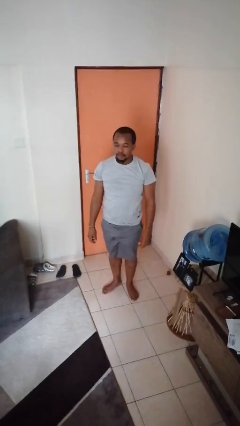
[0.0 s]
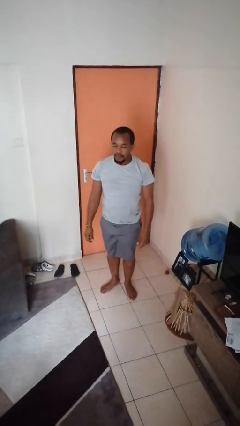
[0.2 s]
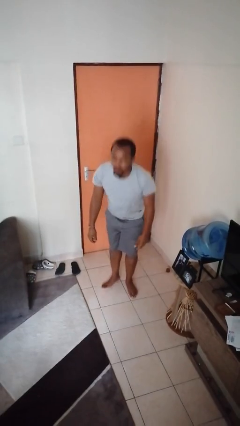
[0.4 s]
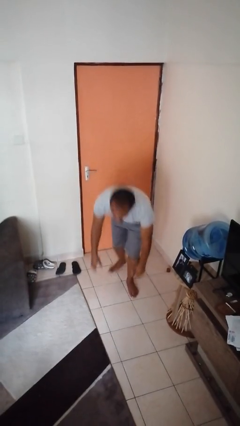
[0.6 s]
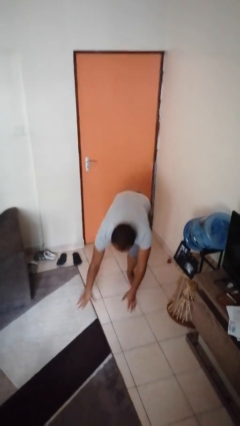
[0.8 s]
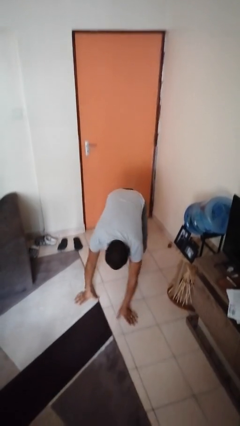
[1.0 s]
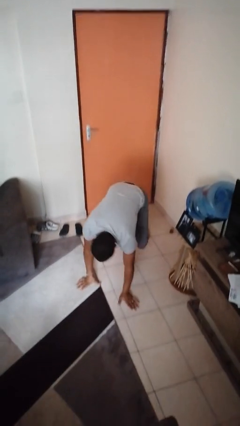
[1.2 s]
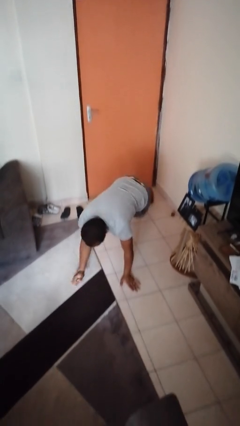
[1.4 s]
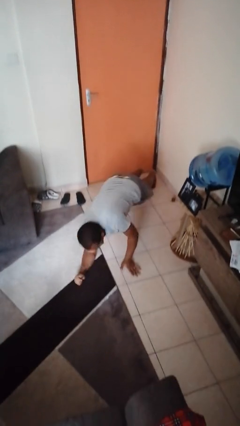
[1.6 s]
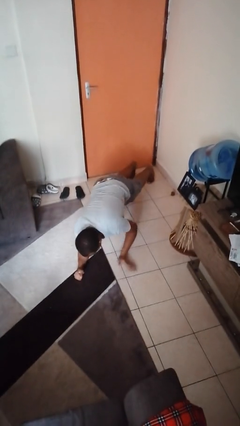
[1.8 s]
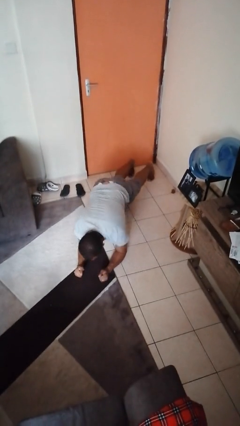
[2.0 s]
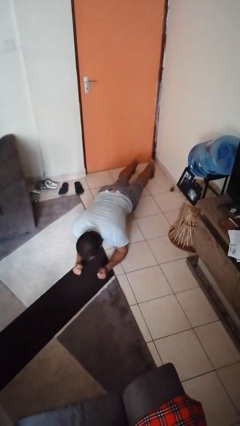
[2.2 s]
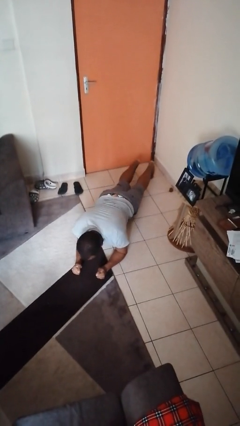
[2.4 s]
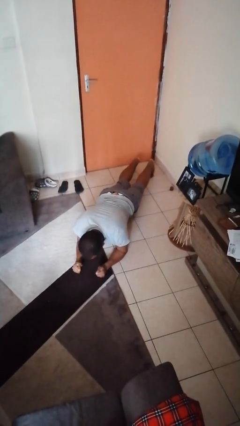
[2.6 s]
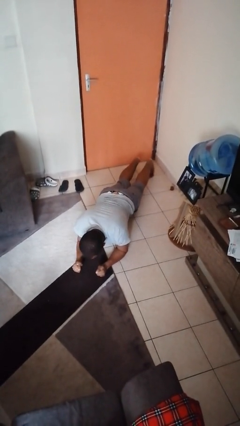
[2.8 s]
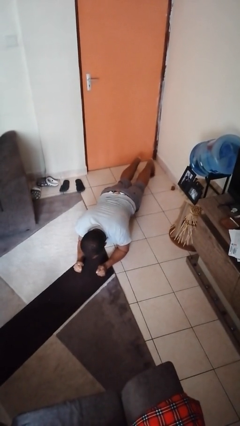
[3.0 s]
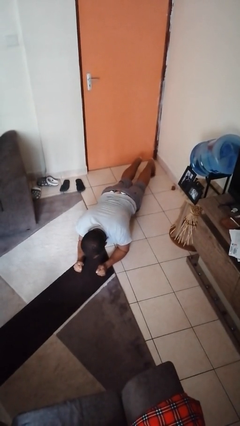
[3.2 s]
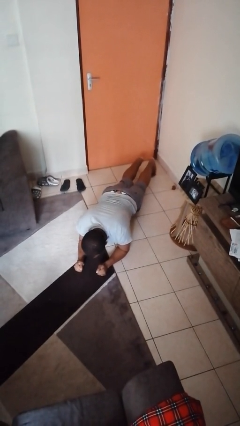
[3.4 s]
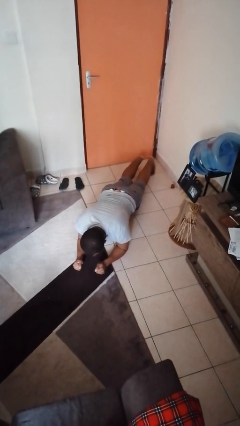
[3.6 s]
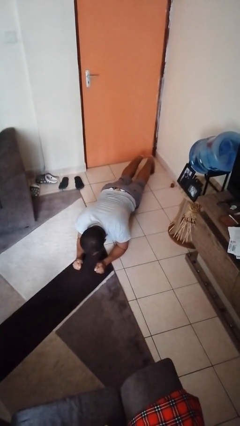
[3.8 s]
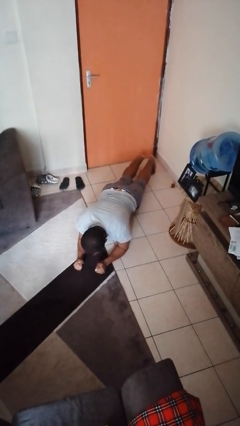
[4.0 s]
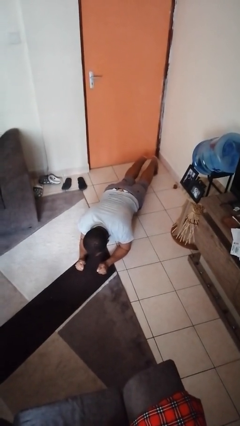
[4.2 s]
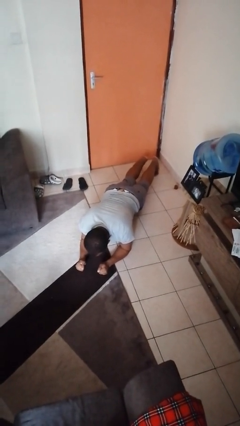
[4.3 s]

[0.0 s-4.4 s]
person exercises with plank

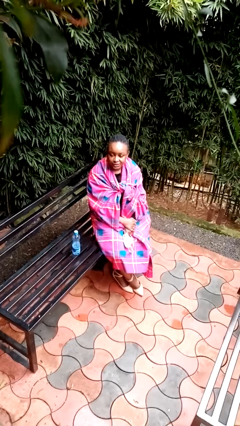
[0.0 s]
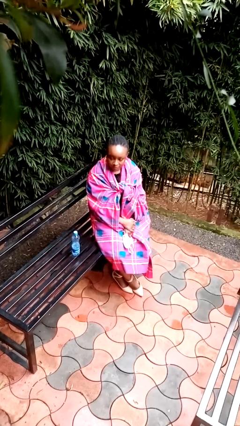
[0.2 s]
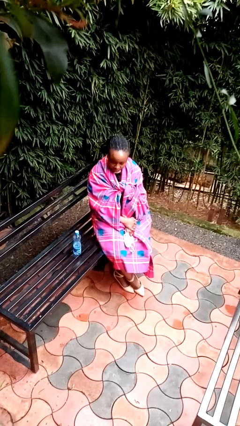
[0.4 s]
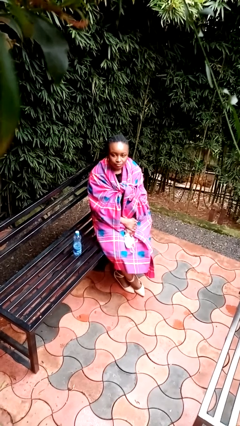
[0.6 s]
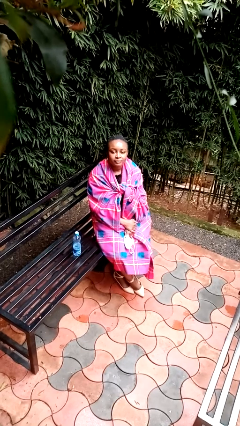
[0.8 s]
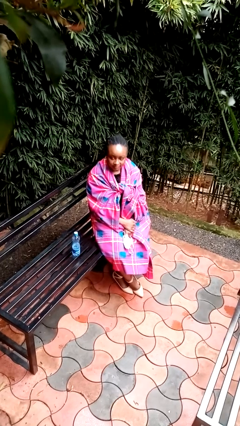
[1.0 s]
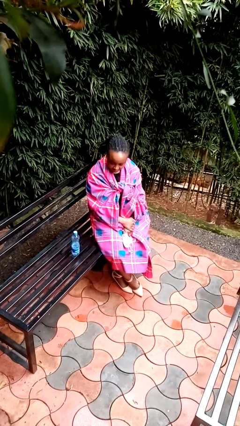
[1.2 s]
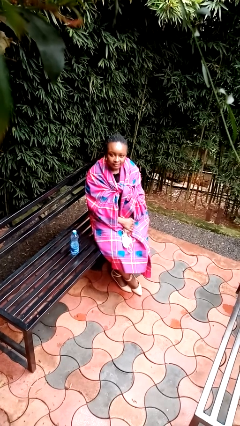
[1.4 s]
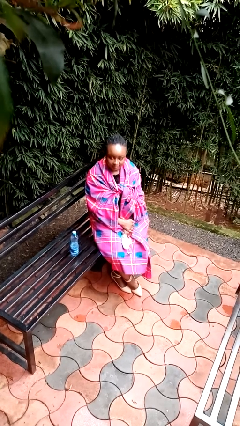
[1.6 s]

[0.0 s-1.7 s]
person nods head

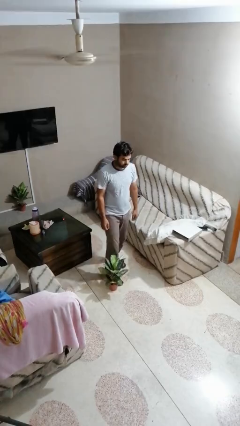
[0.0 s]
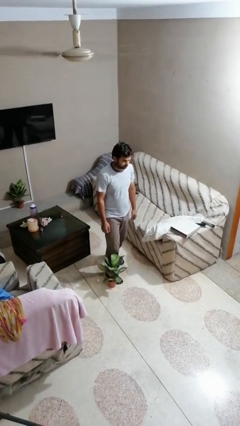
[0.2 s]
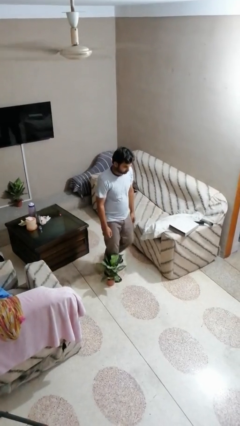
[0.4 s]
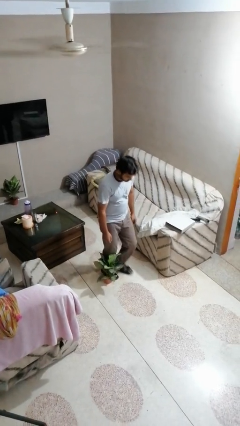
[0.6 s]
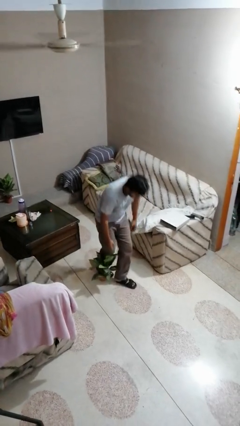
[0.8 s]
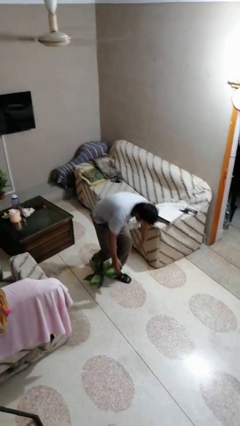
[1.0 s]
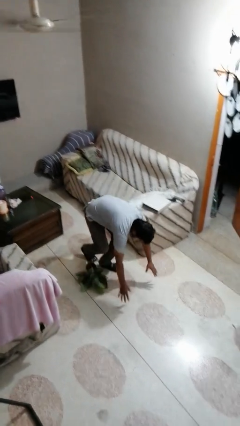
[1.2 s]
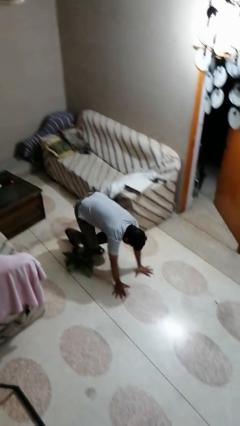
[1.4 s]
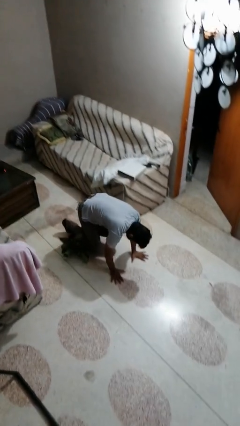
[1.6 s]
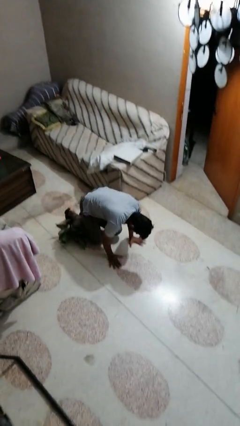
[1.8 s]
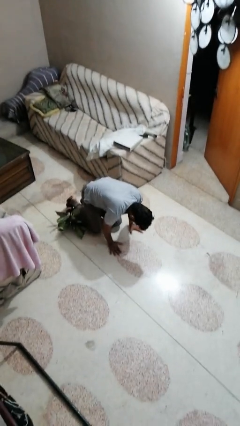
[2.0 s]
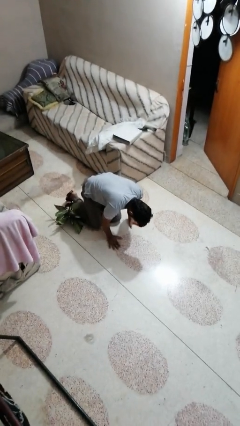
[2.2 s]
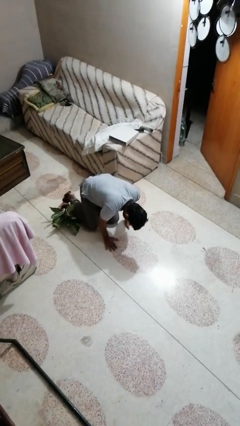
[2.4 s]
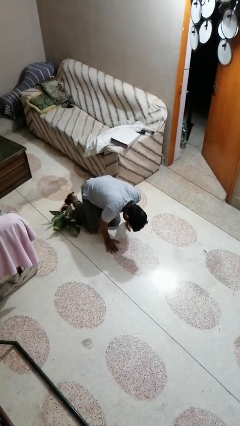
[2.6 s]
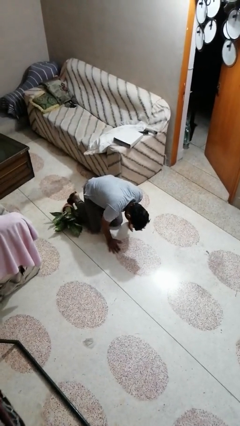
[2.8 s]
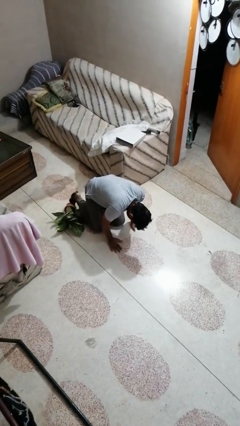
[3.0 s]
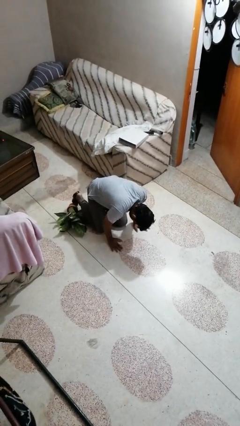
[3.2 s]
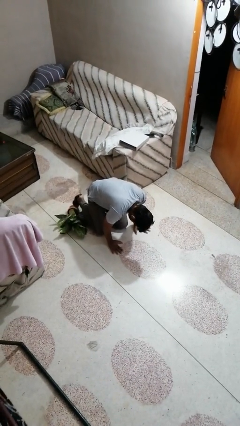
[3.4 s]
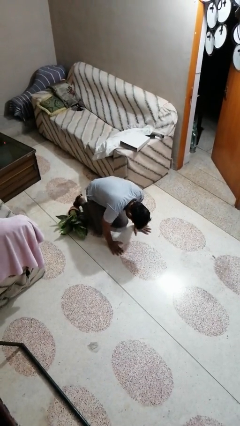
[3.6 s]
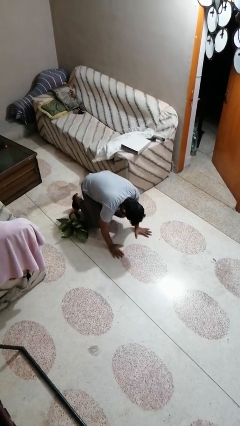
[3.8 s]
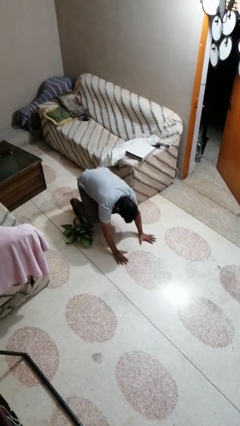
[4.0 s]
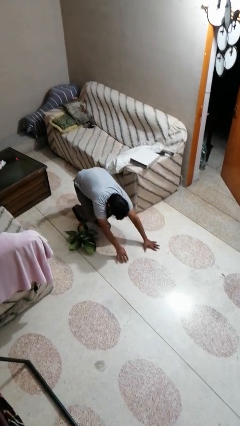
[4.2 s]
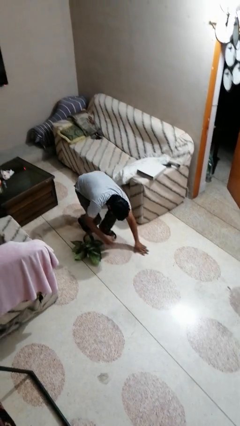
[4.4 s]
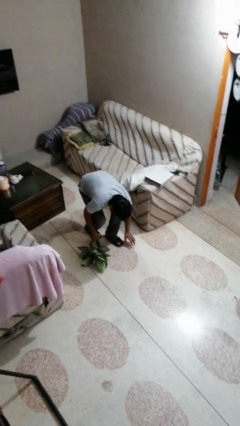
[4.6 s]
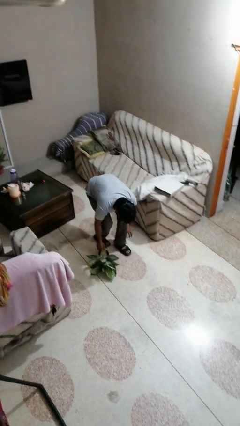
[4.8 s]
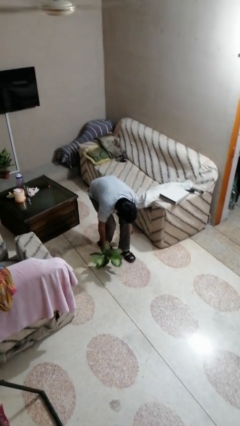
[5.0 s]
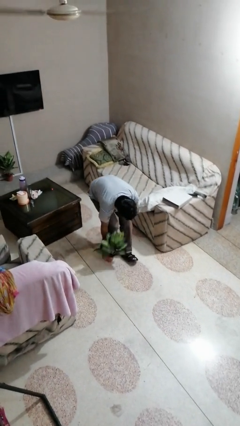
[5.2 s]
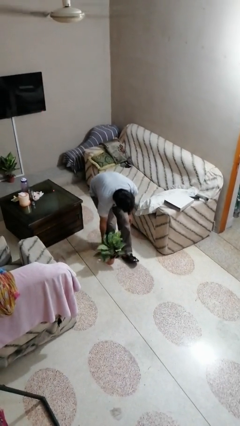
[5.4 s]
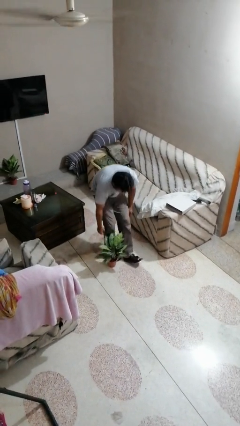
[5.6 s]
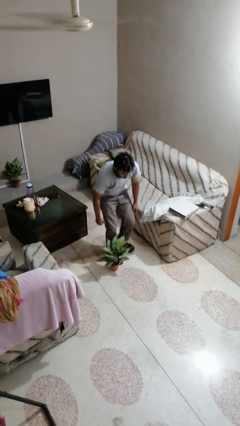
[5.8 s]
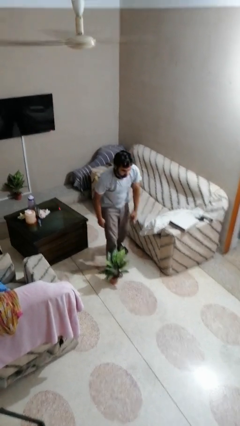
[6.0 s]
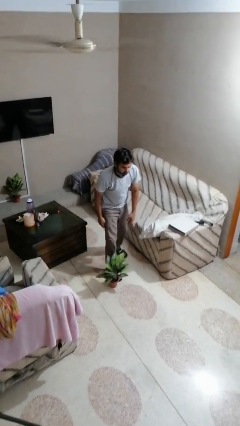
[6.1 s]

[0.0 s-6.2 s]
person stands up from floor

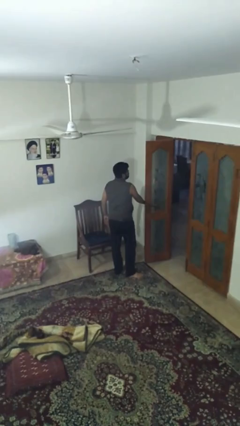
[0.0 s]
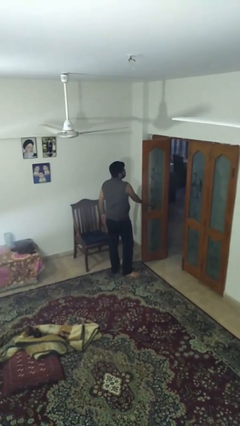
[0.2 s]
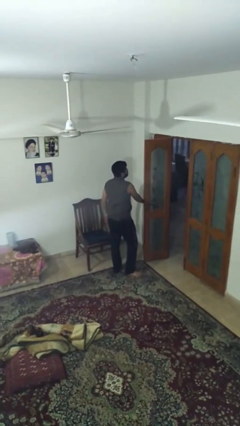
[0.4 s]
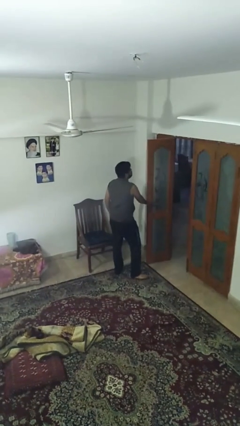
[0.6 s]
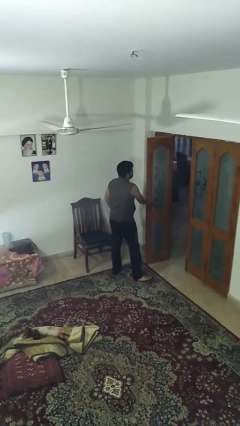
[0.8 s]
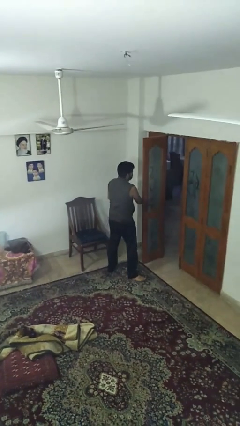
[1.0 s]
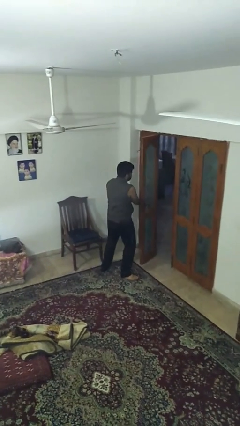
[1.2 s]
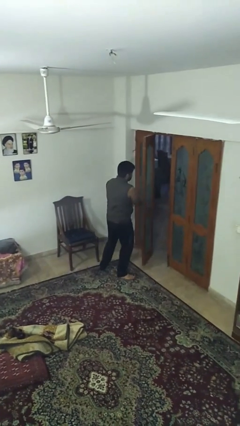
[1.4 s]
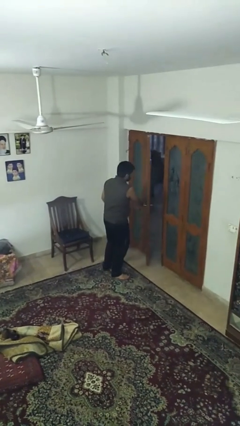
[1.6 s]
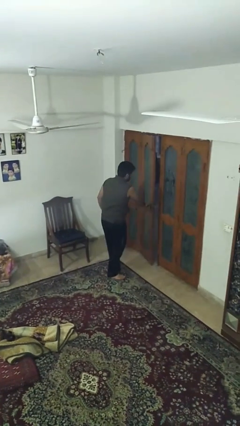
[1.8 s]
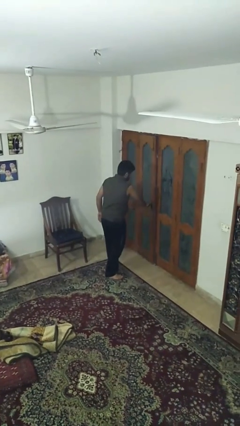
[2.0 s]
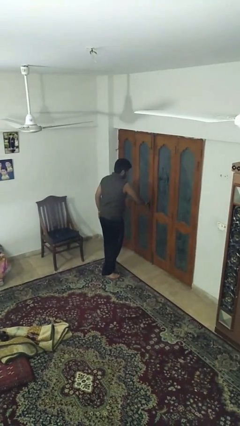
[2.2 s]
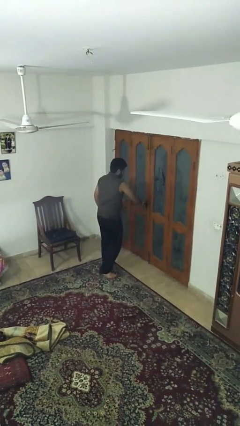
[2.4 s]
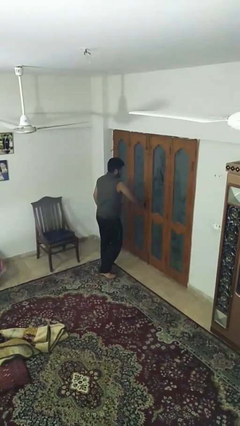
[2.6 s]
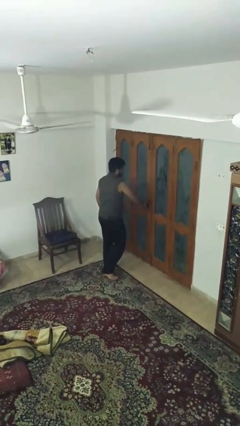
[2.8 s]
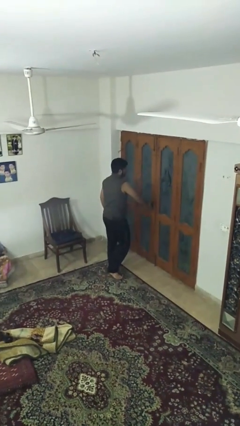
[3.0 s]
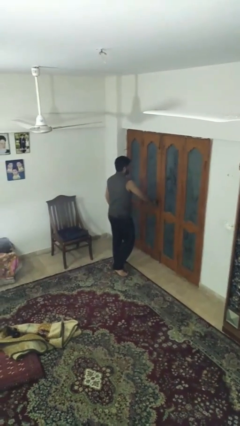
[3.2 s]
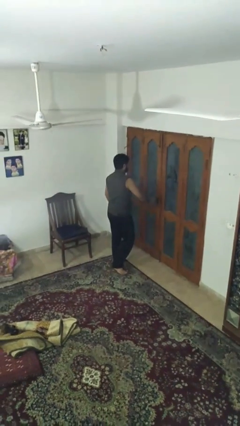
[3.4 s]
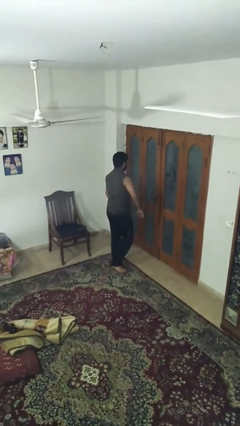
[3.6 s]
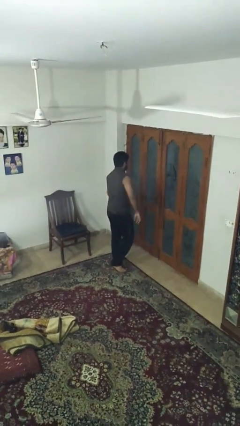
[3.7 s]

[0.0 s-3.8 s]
person closes facility door

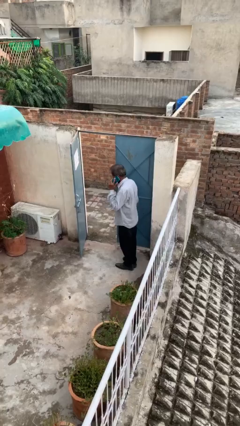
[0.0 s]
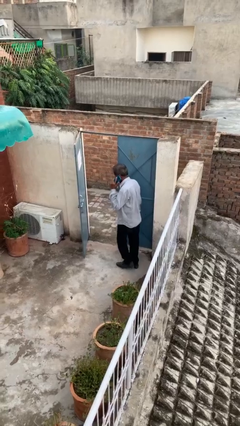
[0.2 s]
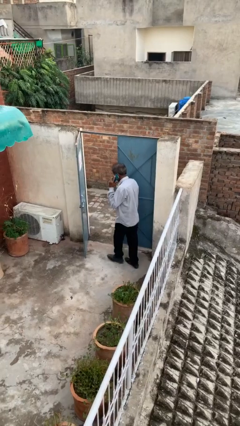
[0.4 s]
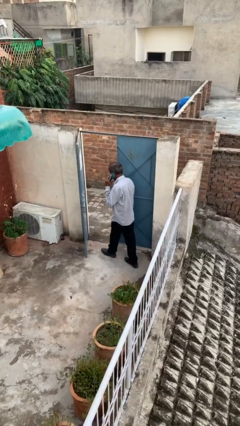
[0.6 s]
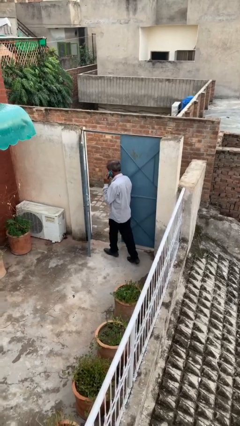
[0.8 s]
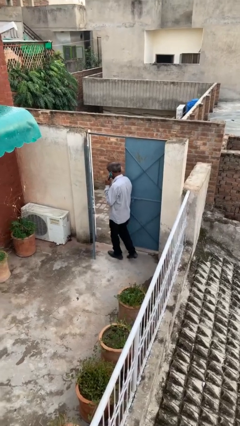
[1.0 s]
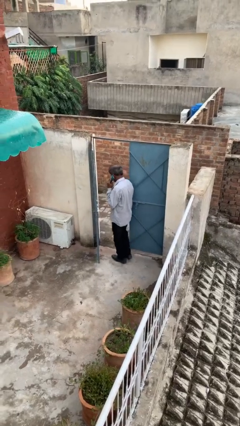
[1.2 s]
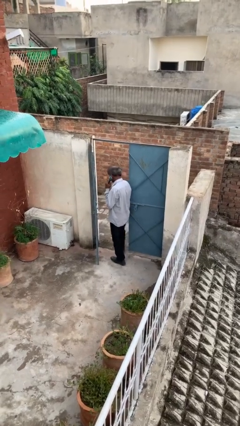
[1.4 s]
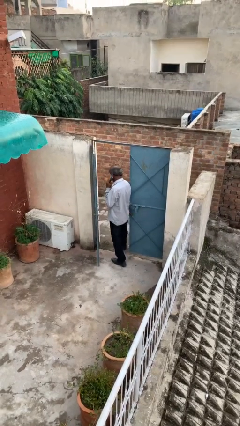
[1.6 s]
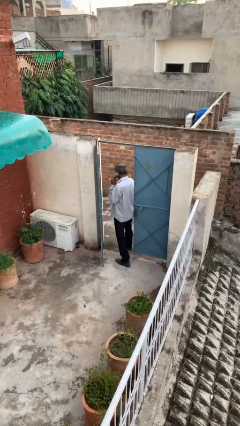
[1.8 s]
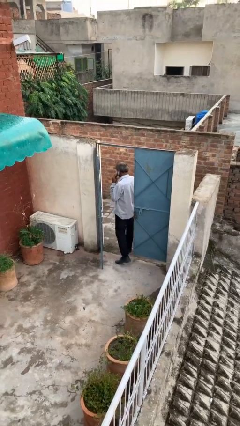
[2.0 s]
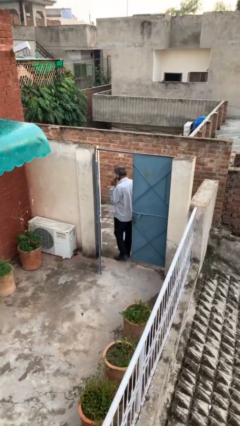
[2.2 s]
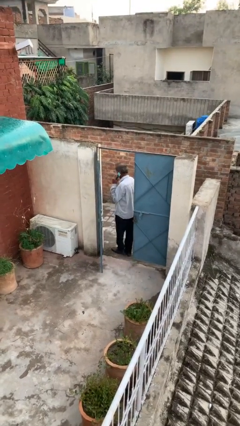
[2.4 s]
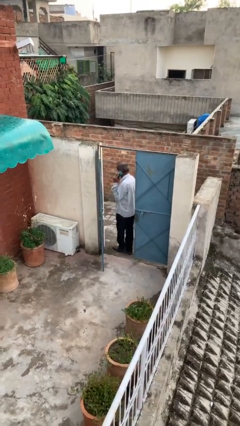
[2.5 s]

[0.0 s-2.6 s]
person exits scene through structure
